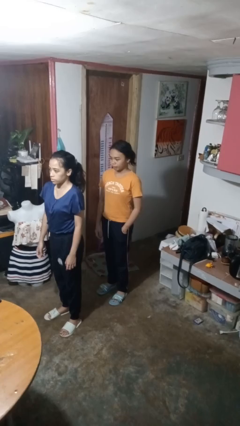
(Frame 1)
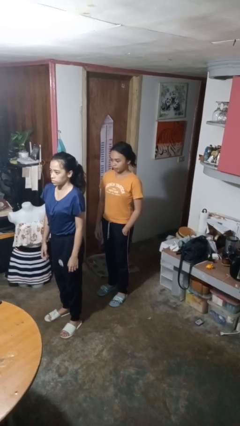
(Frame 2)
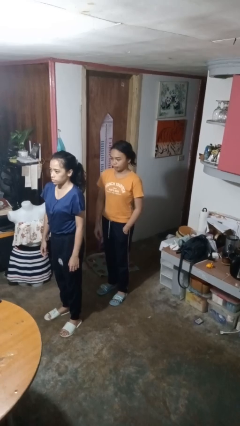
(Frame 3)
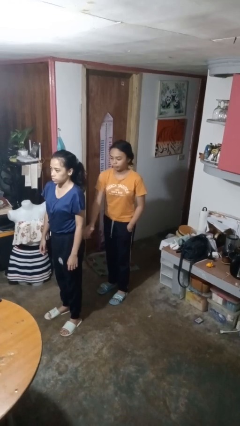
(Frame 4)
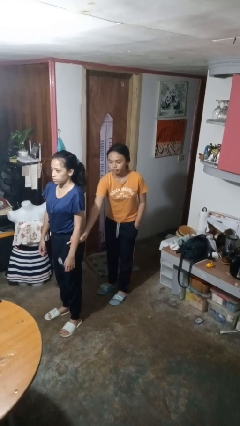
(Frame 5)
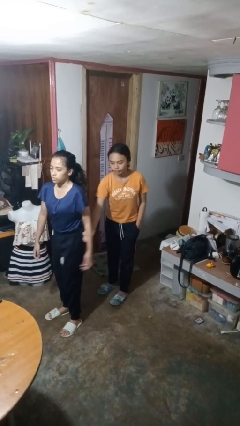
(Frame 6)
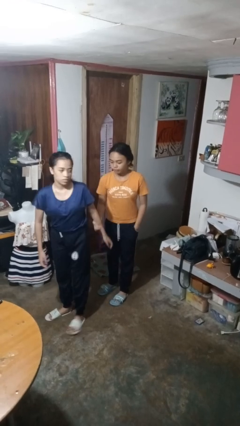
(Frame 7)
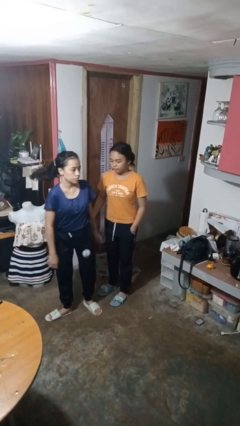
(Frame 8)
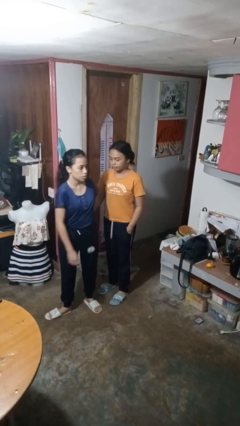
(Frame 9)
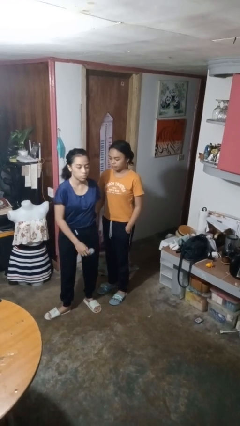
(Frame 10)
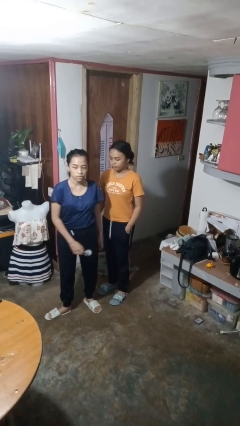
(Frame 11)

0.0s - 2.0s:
person grabs person by forearm

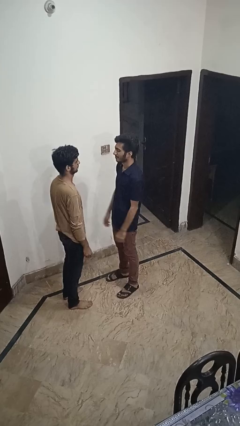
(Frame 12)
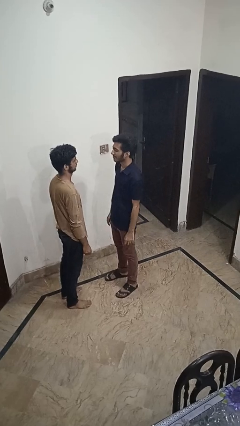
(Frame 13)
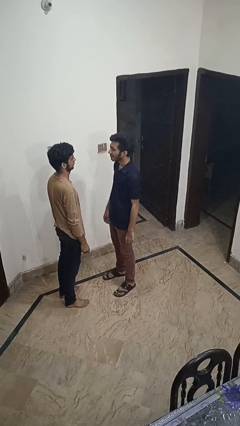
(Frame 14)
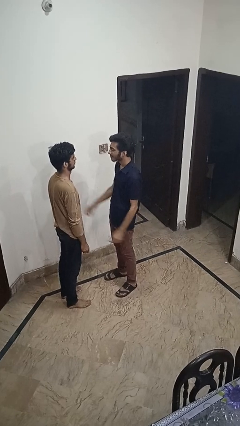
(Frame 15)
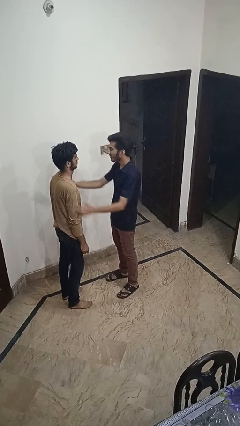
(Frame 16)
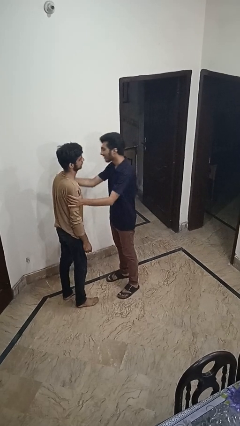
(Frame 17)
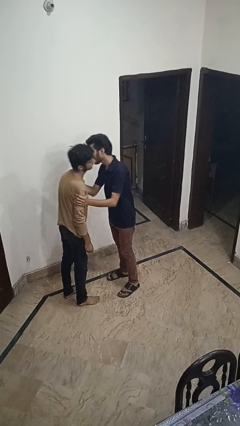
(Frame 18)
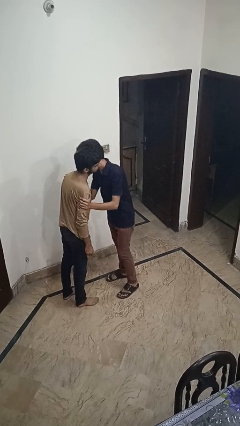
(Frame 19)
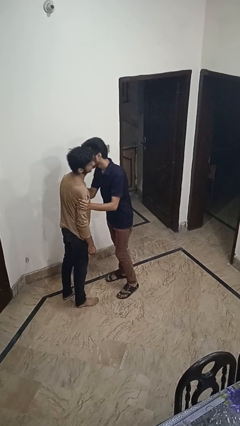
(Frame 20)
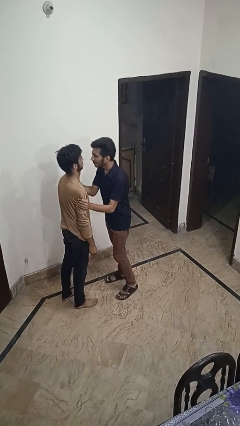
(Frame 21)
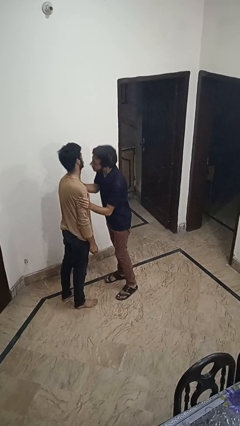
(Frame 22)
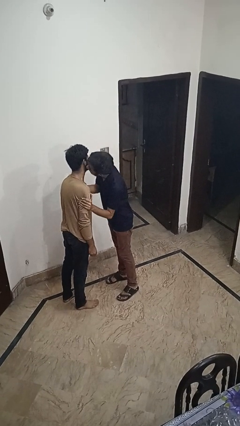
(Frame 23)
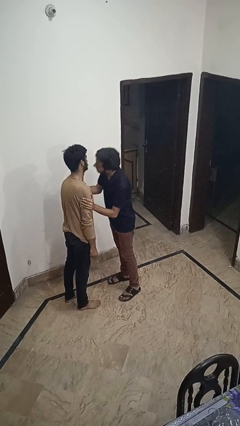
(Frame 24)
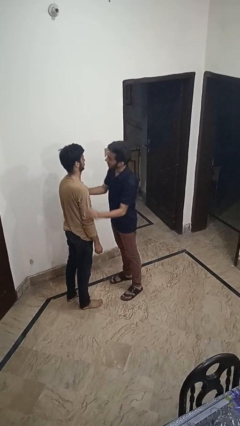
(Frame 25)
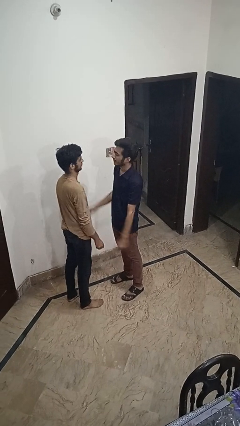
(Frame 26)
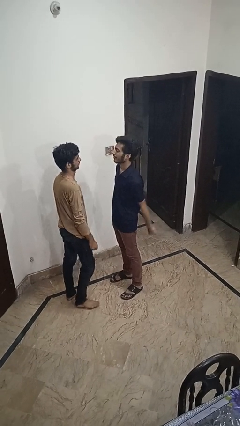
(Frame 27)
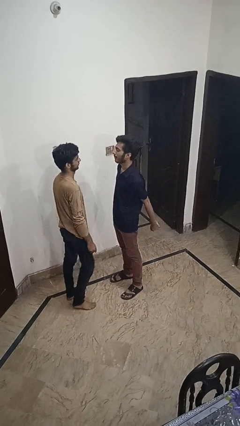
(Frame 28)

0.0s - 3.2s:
person kisses cheek of person

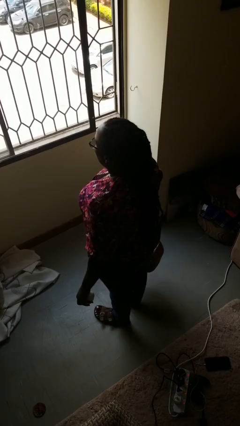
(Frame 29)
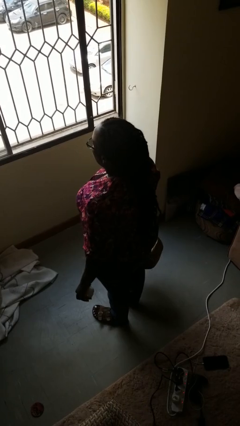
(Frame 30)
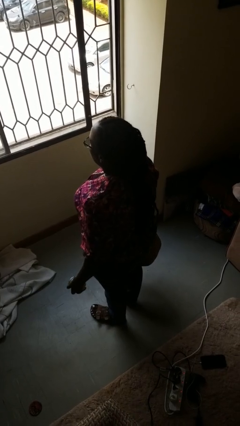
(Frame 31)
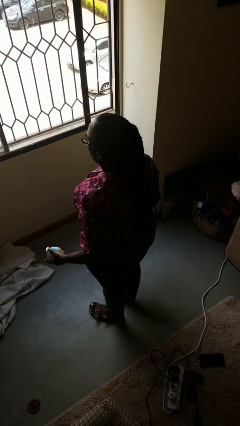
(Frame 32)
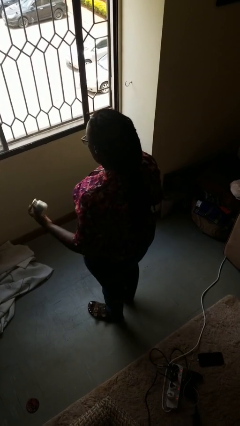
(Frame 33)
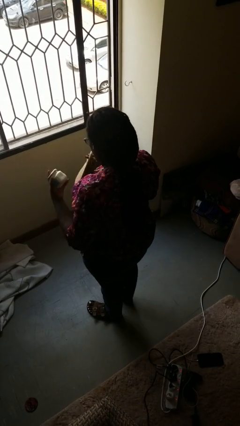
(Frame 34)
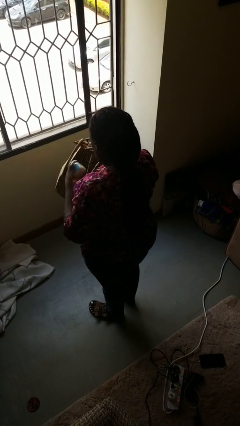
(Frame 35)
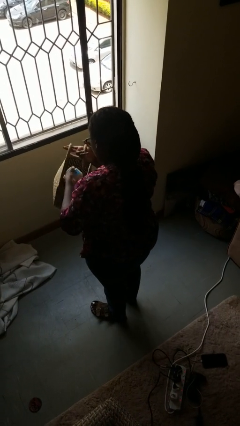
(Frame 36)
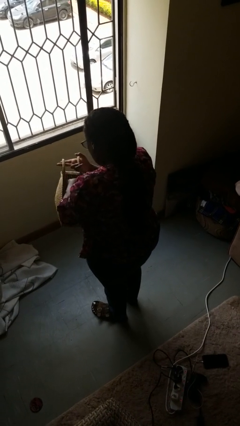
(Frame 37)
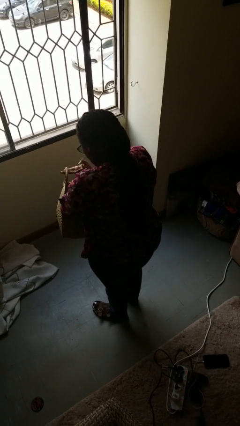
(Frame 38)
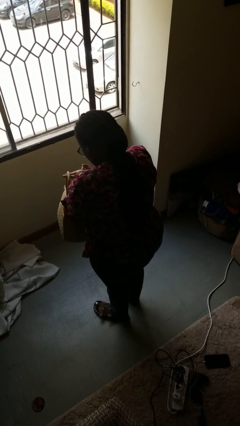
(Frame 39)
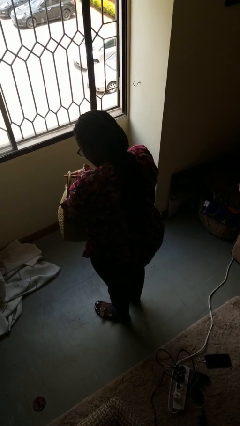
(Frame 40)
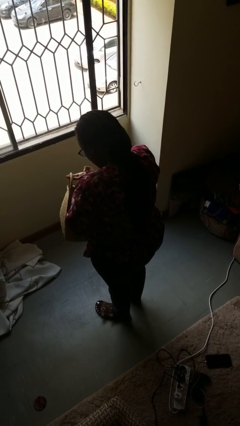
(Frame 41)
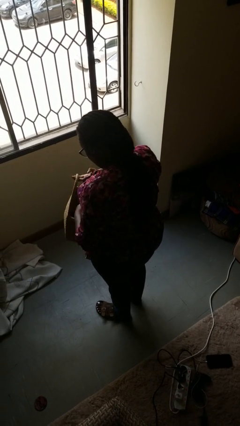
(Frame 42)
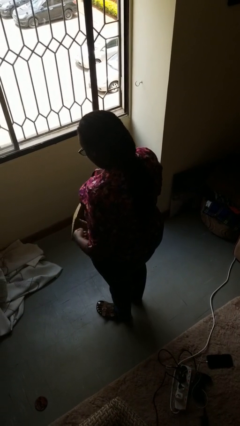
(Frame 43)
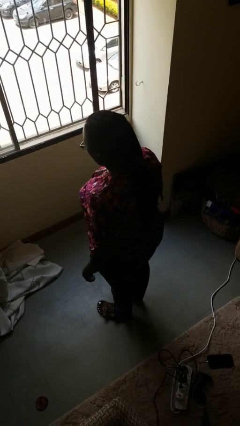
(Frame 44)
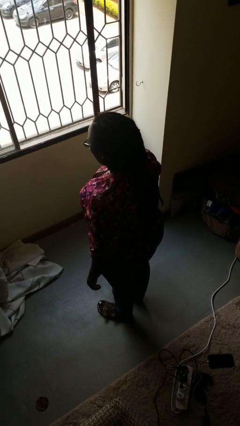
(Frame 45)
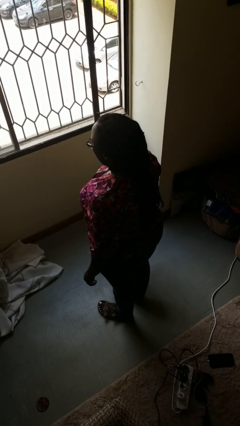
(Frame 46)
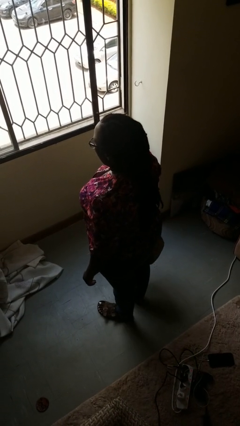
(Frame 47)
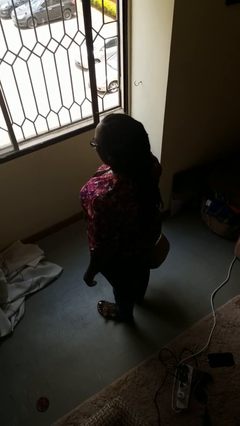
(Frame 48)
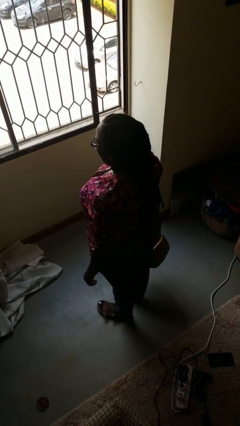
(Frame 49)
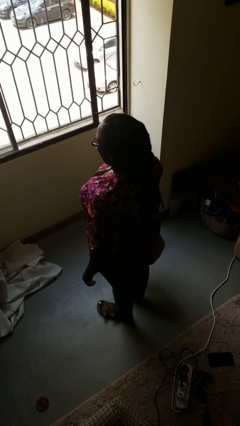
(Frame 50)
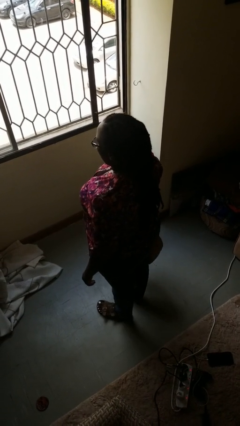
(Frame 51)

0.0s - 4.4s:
person puts object into basket

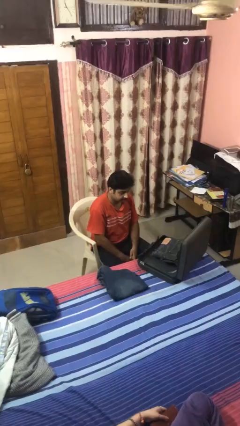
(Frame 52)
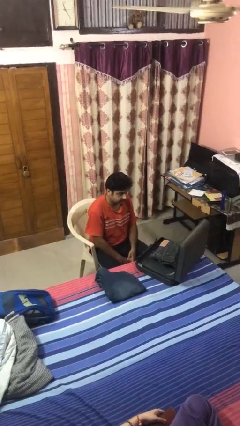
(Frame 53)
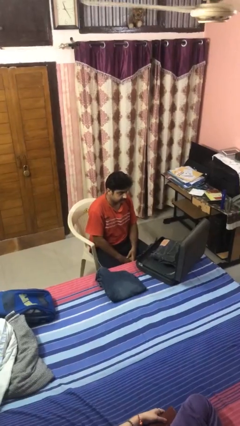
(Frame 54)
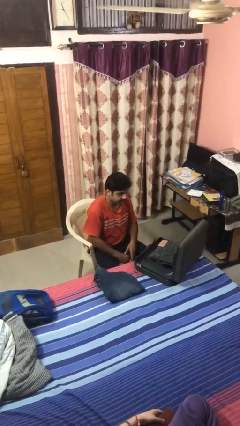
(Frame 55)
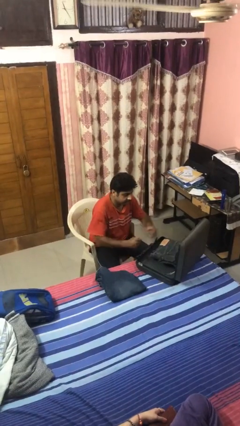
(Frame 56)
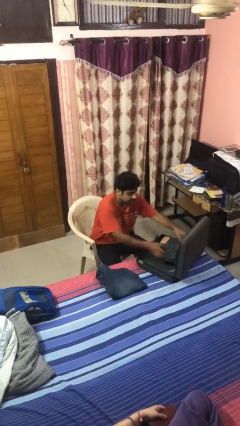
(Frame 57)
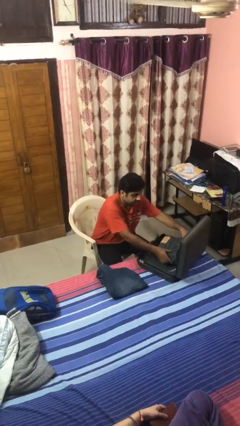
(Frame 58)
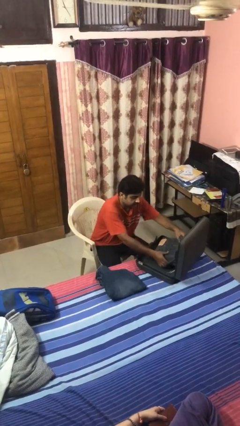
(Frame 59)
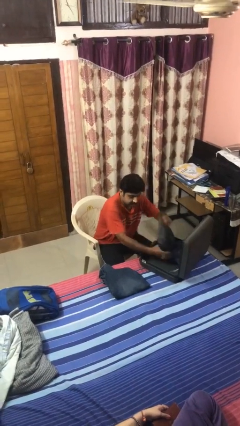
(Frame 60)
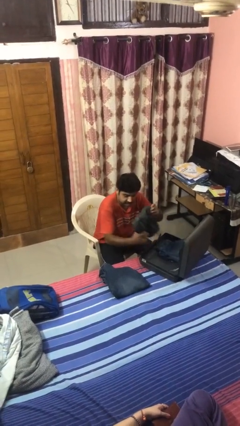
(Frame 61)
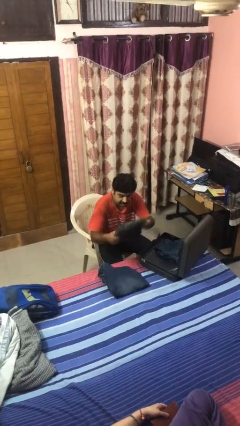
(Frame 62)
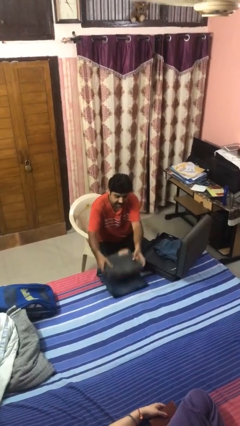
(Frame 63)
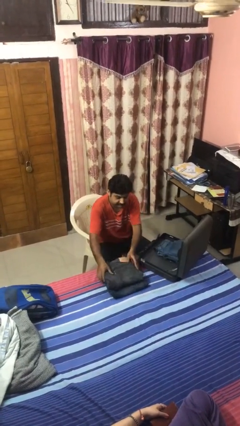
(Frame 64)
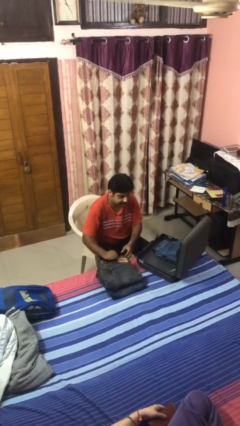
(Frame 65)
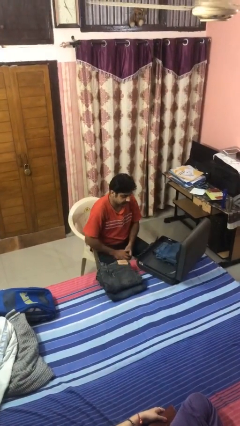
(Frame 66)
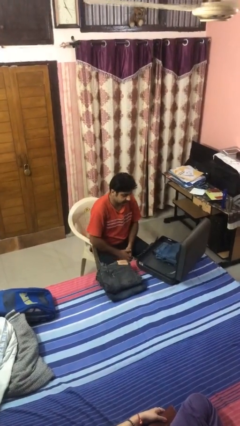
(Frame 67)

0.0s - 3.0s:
person unloads clothes from suitcase

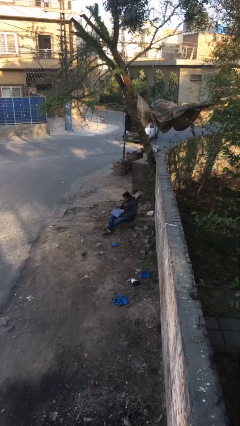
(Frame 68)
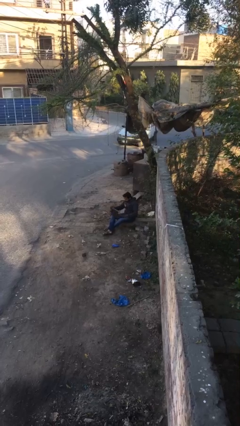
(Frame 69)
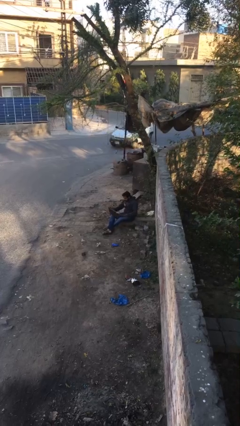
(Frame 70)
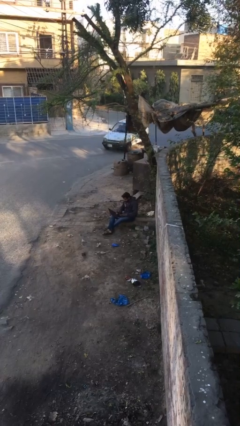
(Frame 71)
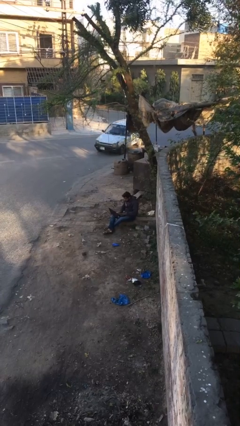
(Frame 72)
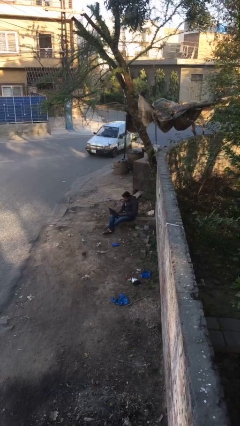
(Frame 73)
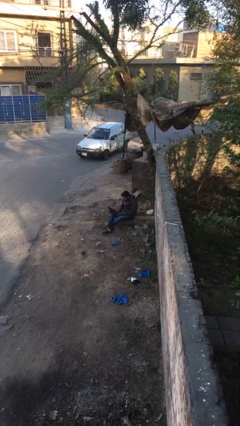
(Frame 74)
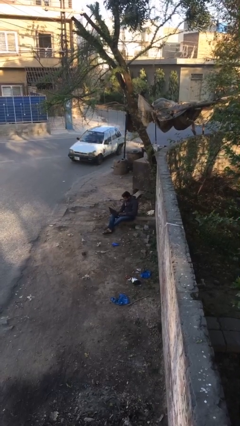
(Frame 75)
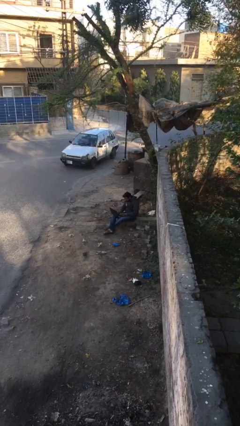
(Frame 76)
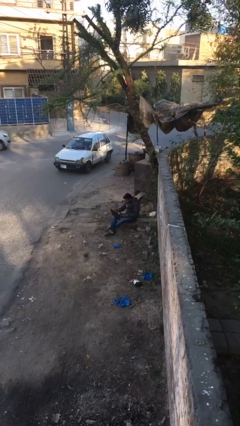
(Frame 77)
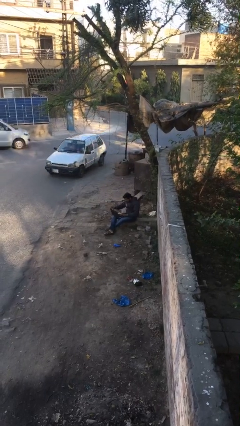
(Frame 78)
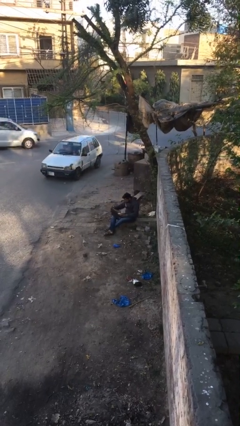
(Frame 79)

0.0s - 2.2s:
person interacts with laptop

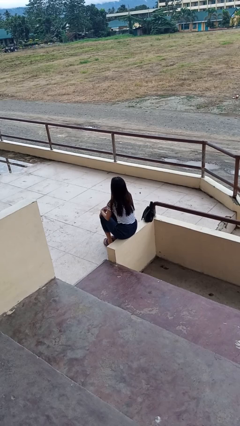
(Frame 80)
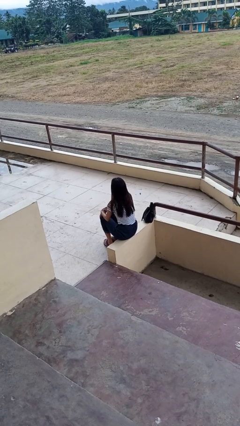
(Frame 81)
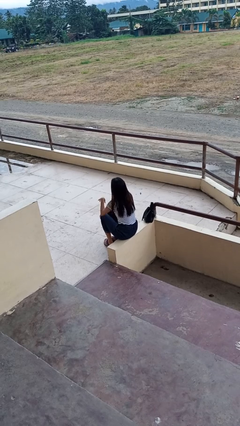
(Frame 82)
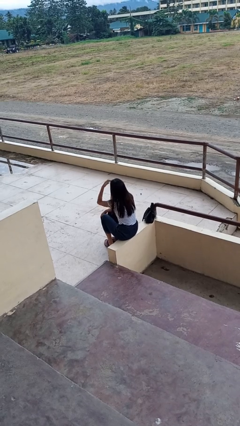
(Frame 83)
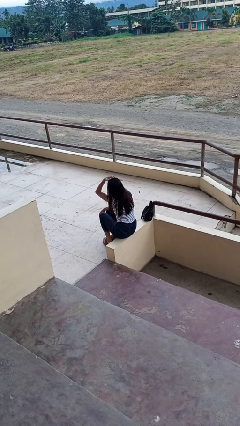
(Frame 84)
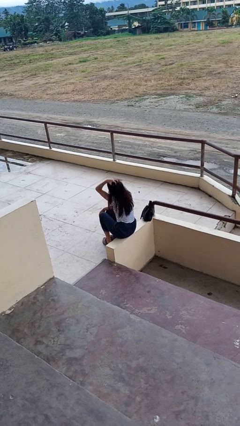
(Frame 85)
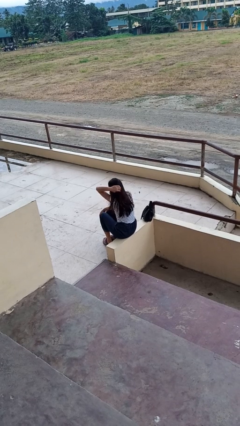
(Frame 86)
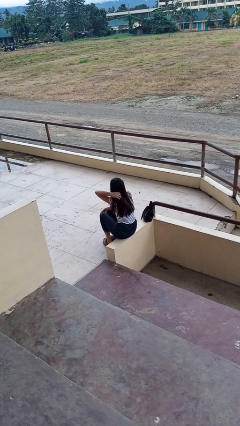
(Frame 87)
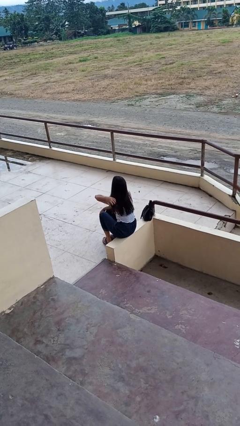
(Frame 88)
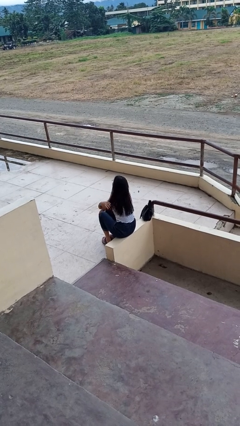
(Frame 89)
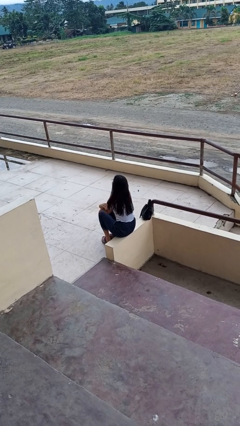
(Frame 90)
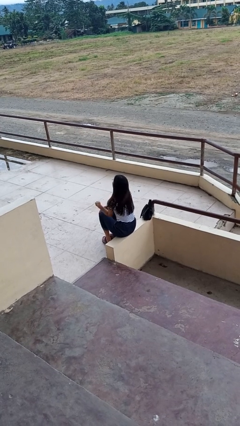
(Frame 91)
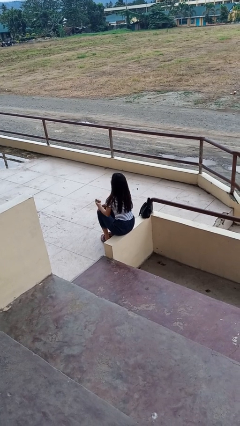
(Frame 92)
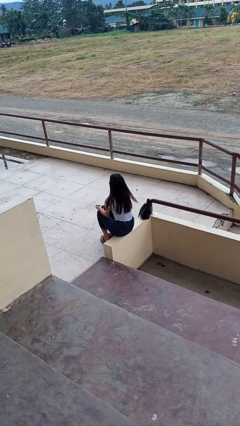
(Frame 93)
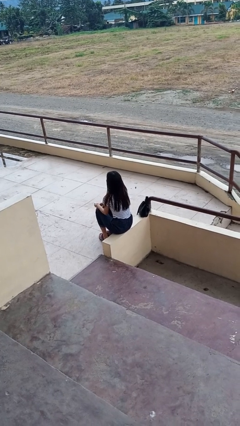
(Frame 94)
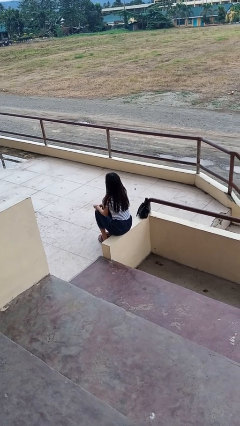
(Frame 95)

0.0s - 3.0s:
person strokes hair
